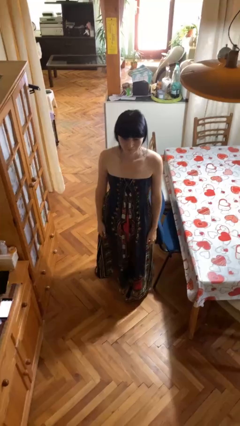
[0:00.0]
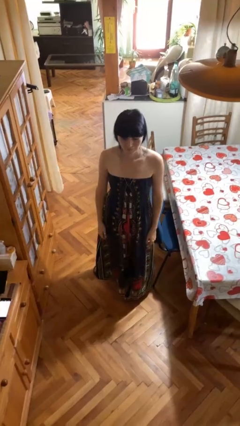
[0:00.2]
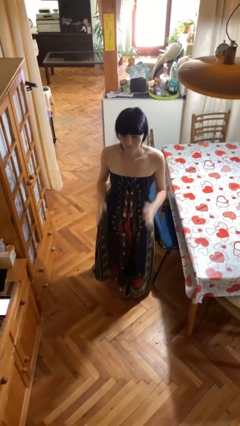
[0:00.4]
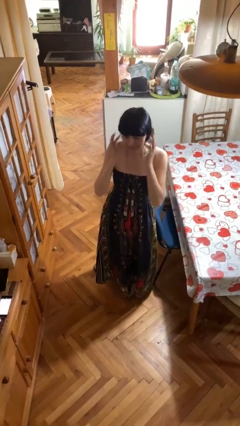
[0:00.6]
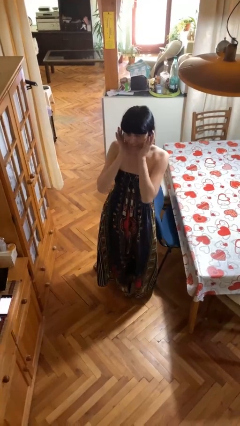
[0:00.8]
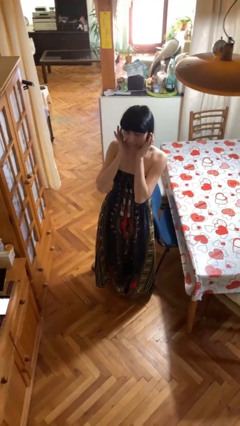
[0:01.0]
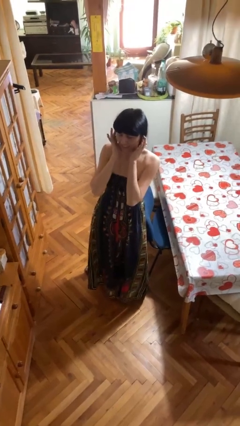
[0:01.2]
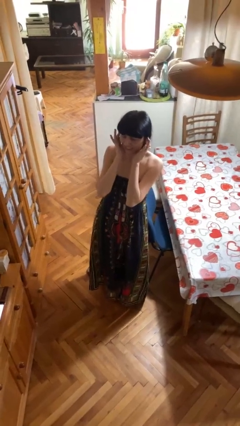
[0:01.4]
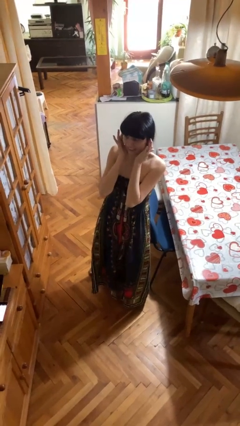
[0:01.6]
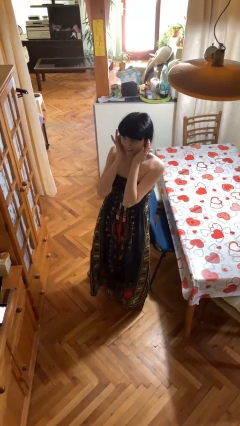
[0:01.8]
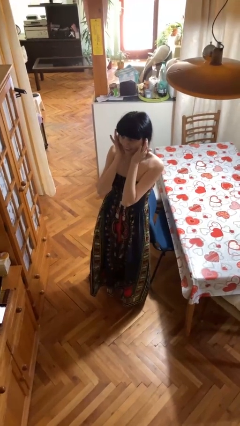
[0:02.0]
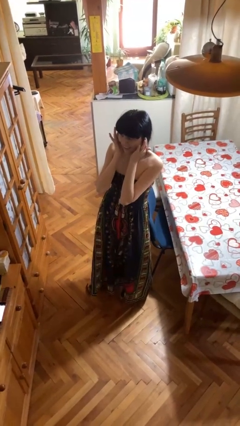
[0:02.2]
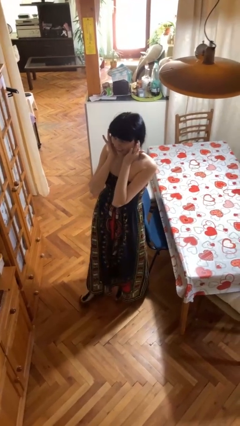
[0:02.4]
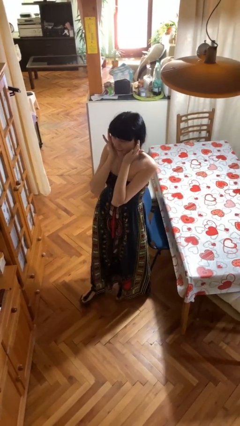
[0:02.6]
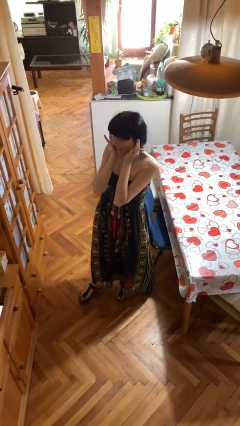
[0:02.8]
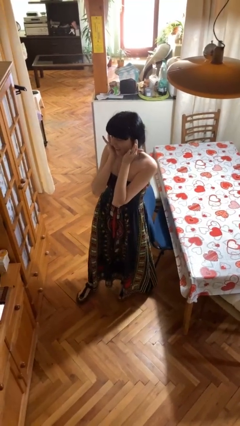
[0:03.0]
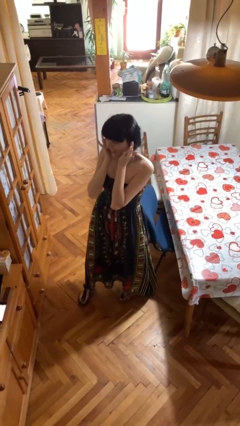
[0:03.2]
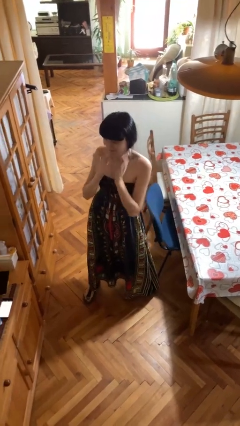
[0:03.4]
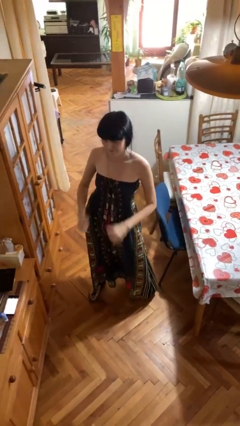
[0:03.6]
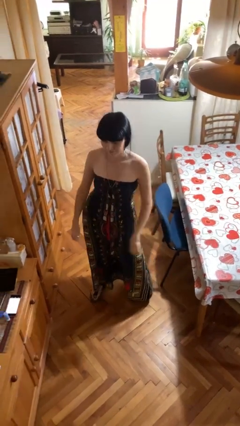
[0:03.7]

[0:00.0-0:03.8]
person puts fingers in ear

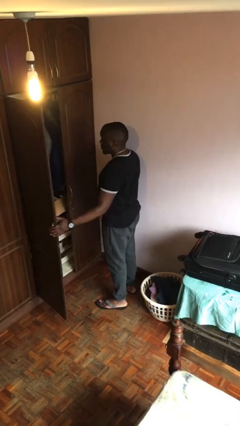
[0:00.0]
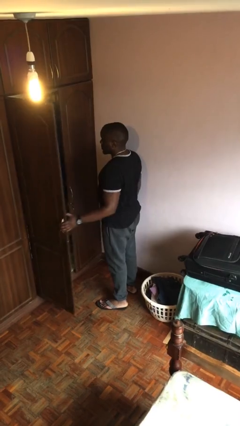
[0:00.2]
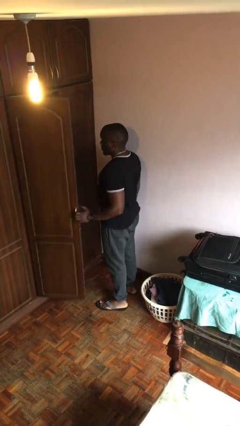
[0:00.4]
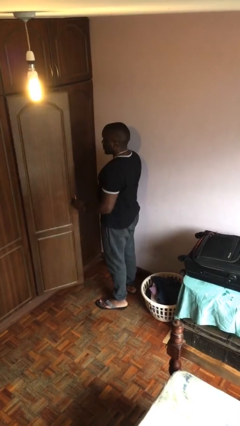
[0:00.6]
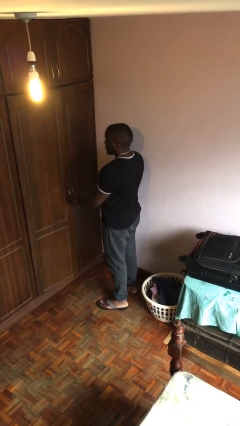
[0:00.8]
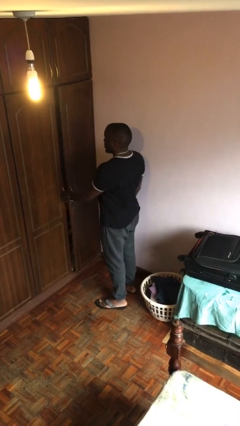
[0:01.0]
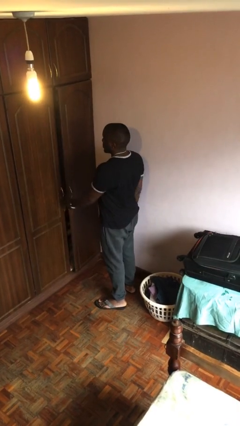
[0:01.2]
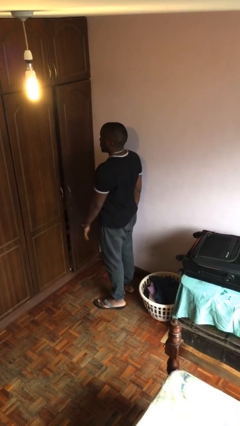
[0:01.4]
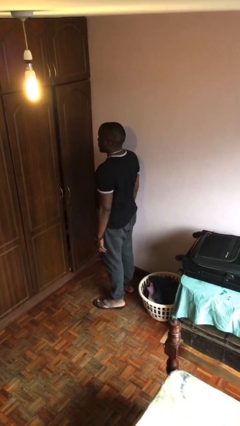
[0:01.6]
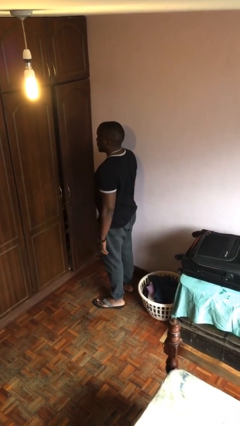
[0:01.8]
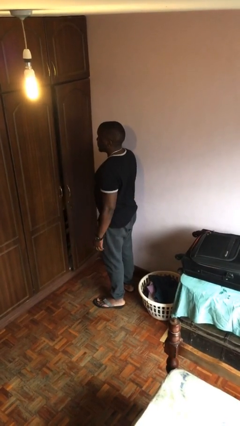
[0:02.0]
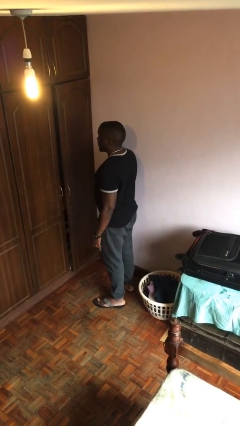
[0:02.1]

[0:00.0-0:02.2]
person closes closet door

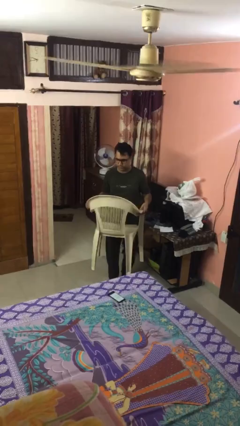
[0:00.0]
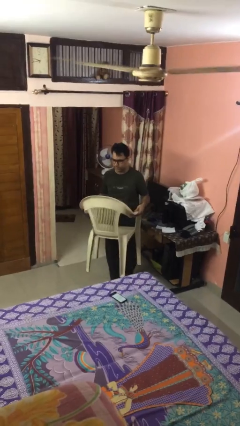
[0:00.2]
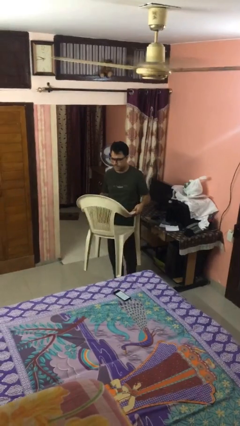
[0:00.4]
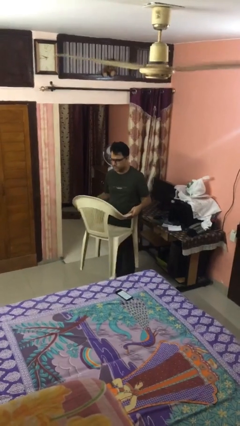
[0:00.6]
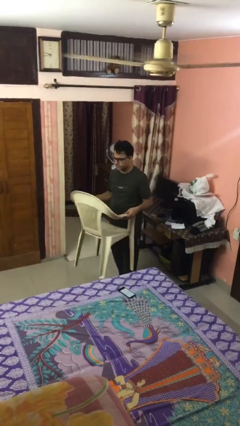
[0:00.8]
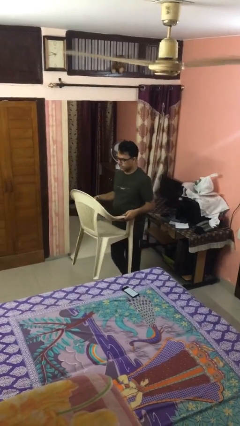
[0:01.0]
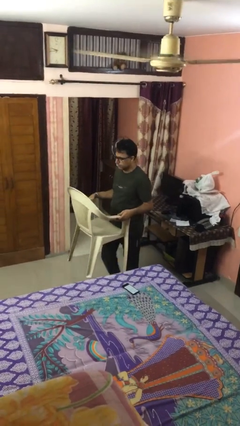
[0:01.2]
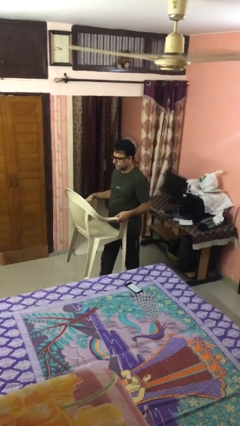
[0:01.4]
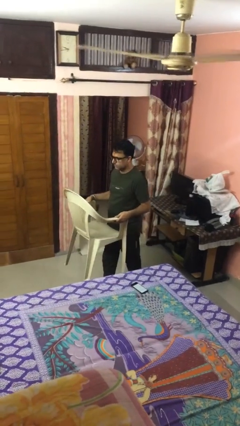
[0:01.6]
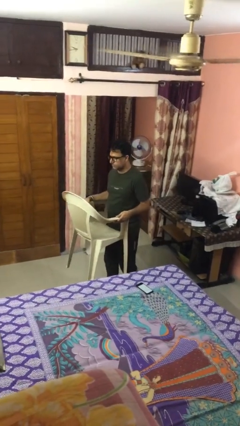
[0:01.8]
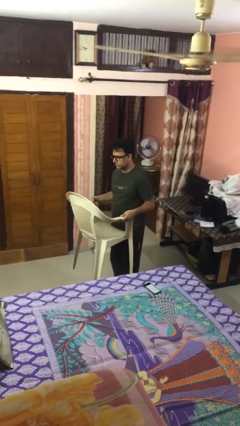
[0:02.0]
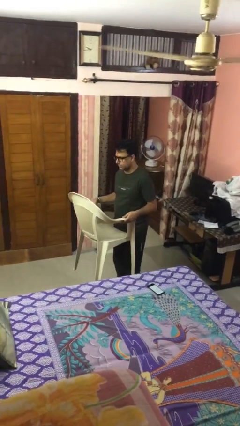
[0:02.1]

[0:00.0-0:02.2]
person carries furniture

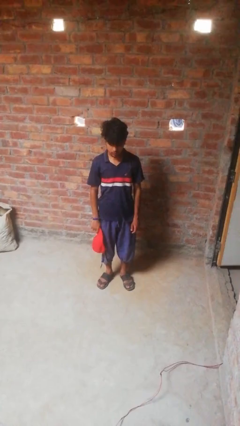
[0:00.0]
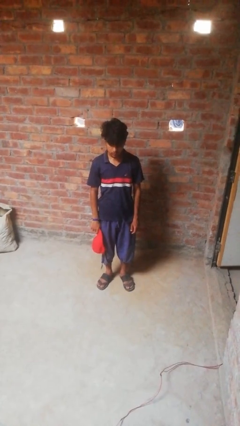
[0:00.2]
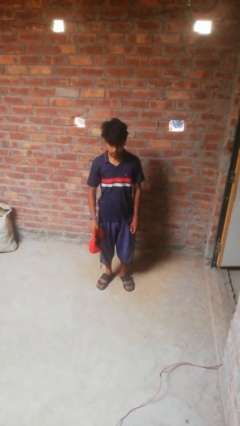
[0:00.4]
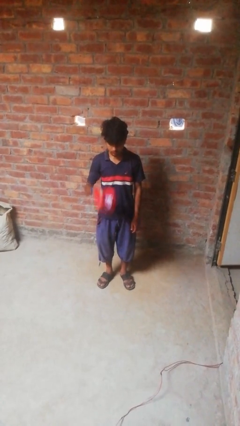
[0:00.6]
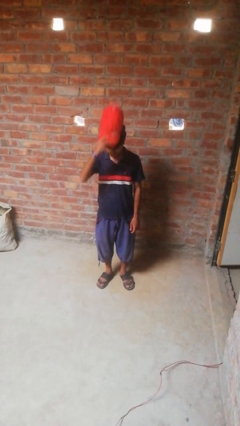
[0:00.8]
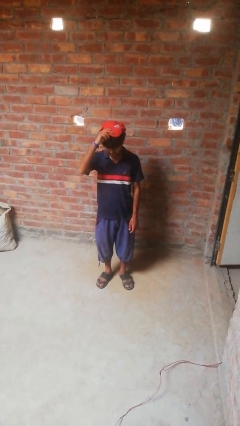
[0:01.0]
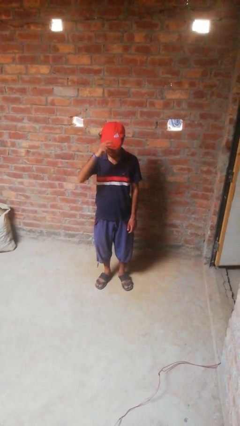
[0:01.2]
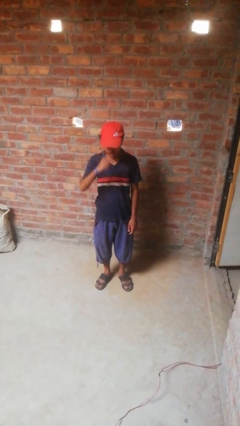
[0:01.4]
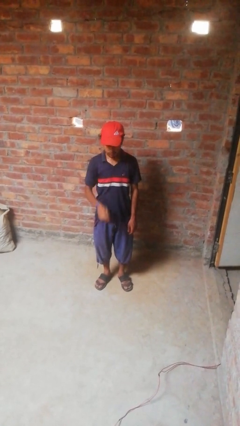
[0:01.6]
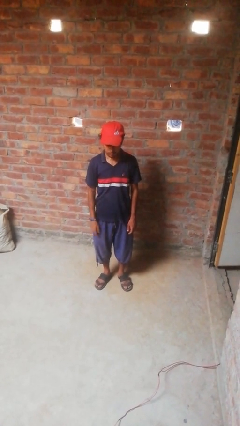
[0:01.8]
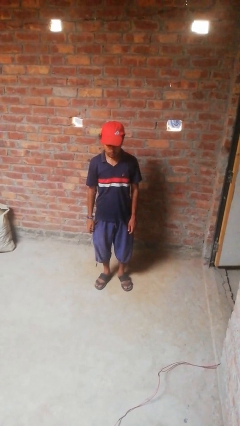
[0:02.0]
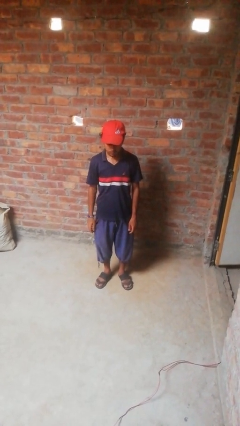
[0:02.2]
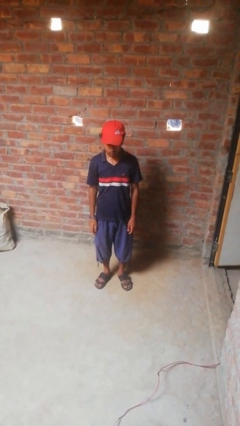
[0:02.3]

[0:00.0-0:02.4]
person puts on hat

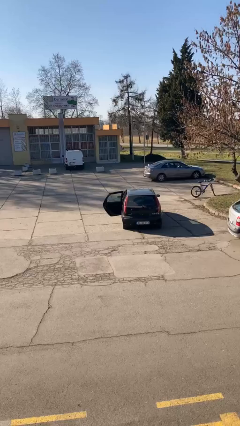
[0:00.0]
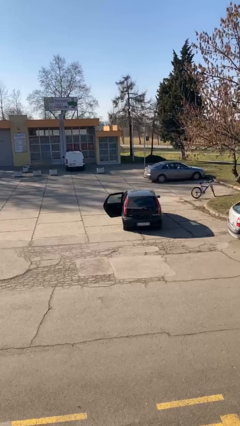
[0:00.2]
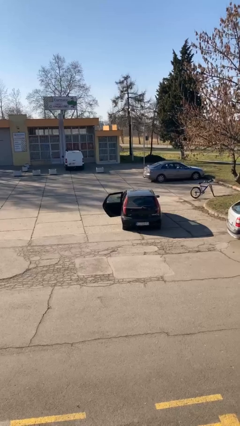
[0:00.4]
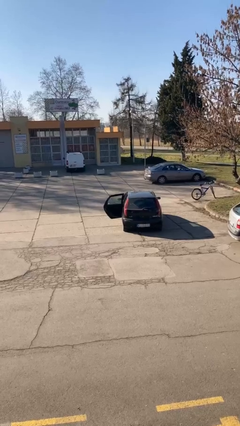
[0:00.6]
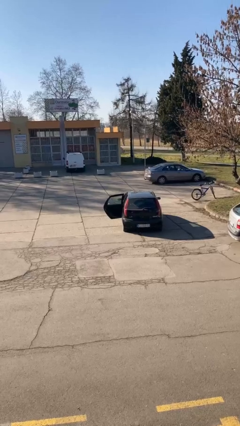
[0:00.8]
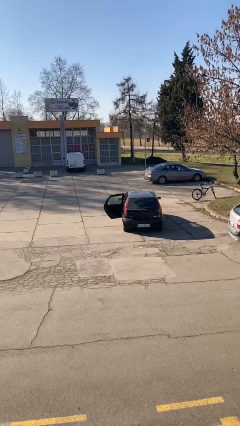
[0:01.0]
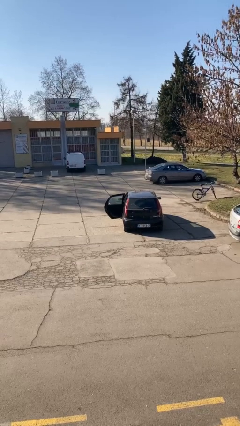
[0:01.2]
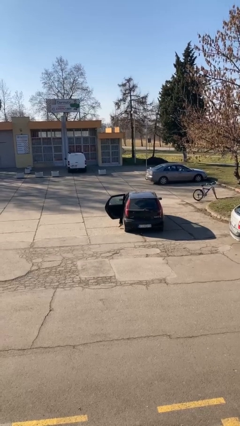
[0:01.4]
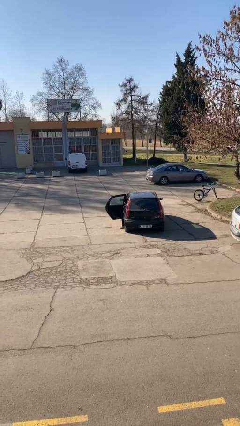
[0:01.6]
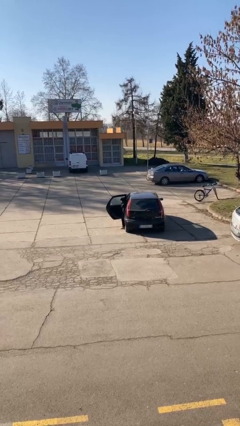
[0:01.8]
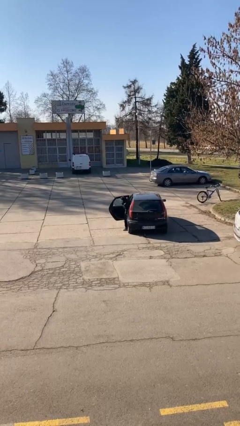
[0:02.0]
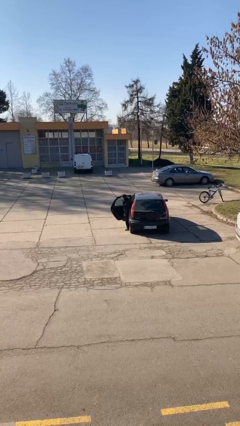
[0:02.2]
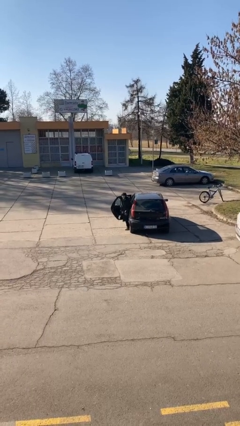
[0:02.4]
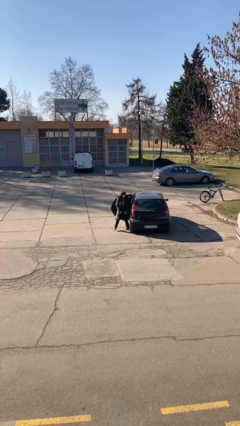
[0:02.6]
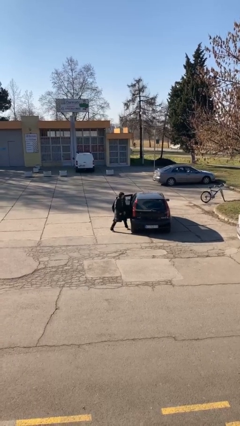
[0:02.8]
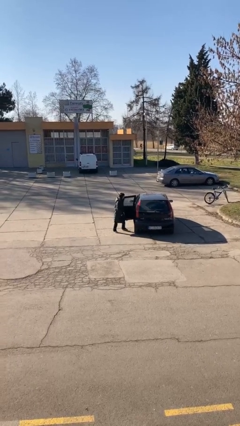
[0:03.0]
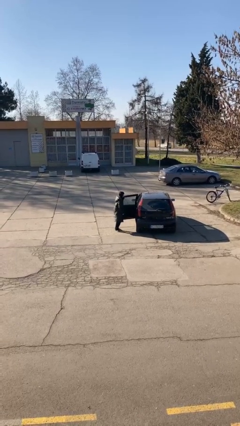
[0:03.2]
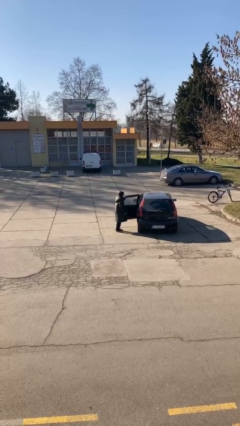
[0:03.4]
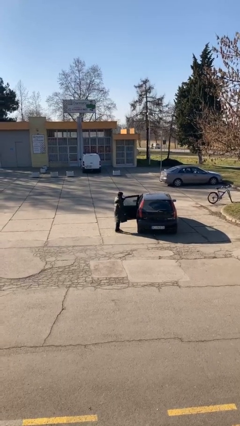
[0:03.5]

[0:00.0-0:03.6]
person exits car

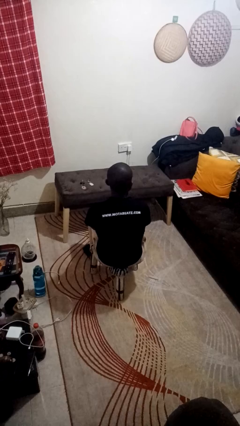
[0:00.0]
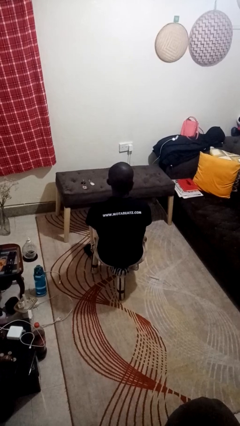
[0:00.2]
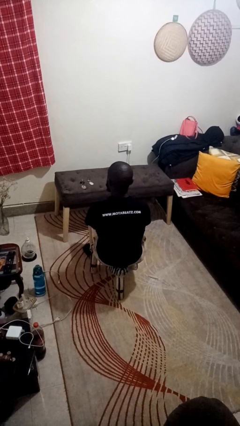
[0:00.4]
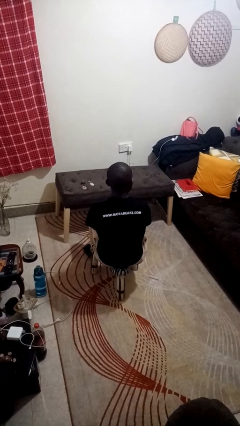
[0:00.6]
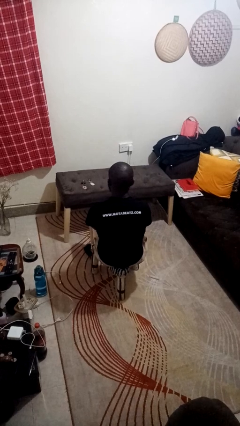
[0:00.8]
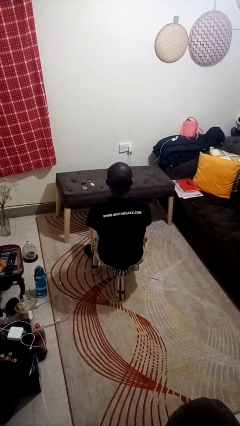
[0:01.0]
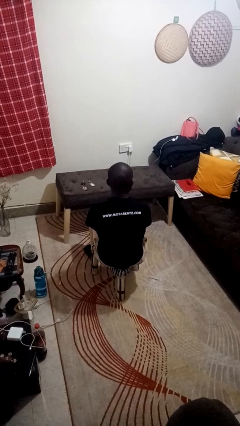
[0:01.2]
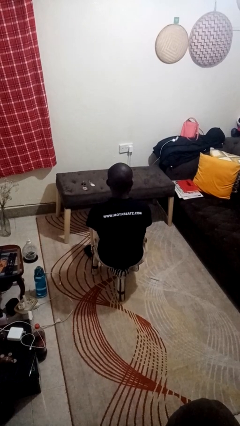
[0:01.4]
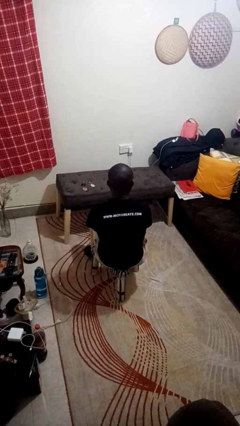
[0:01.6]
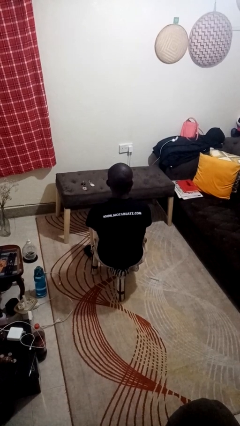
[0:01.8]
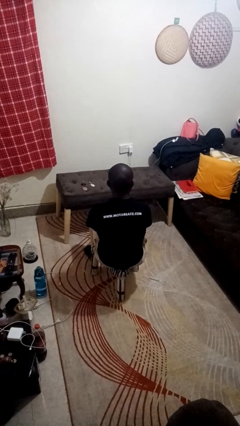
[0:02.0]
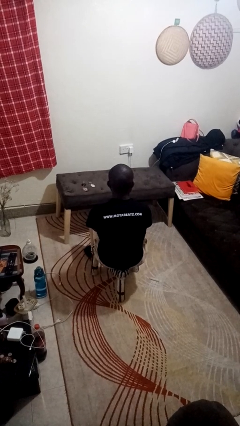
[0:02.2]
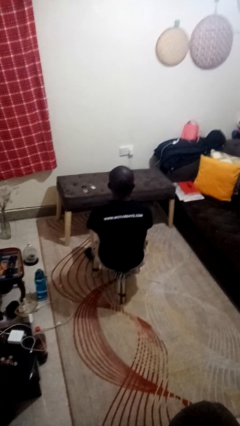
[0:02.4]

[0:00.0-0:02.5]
person shakes head

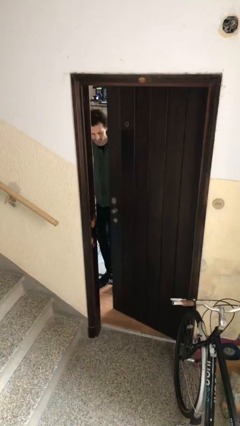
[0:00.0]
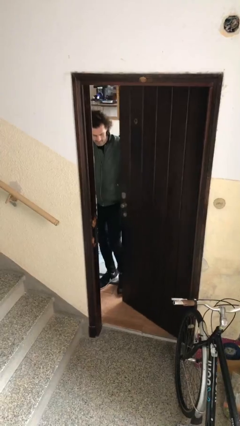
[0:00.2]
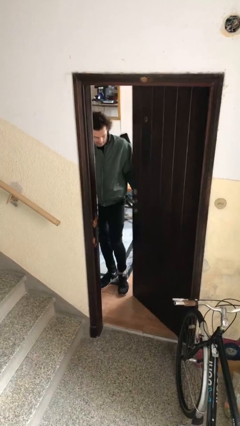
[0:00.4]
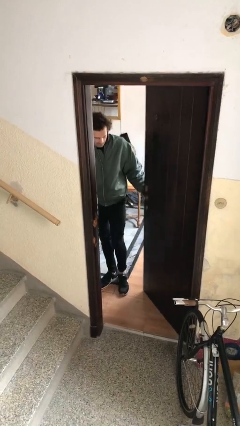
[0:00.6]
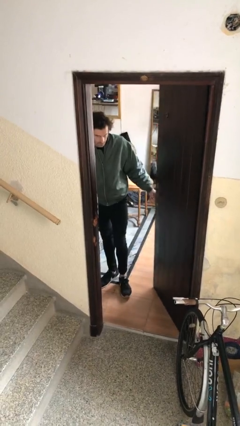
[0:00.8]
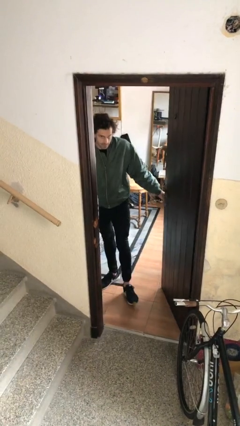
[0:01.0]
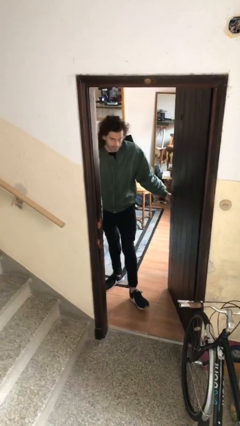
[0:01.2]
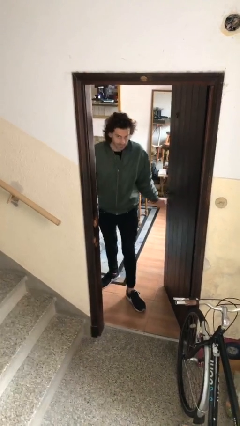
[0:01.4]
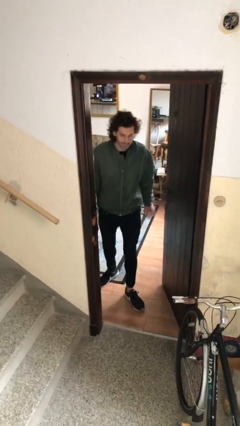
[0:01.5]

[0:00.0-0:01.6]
person opens facility door
